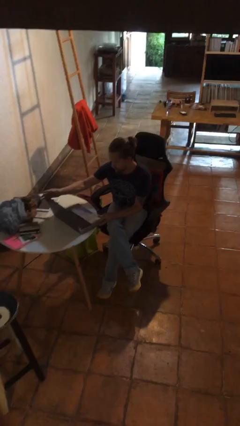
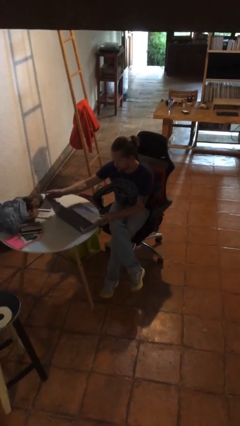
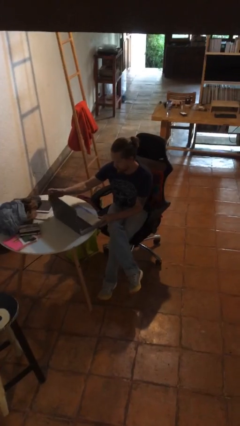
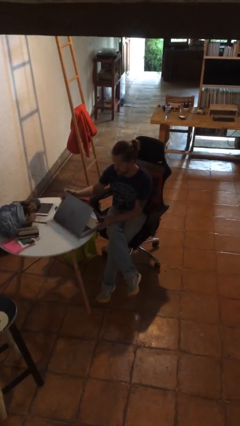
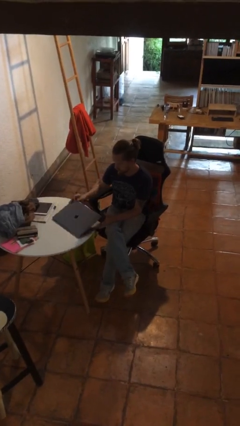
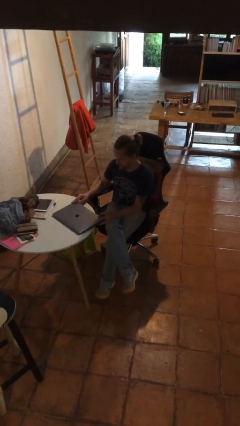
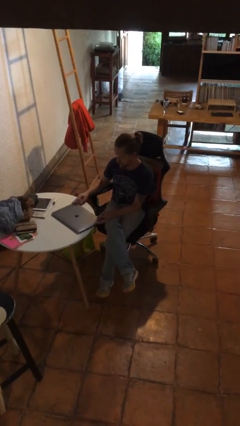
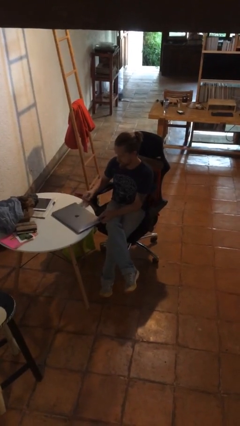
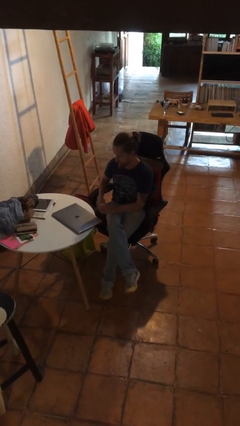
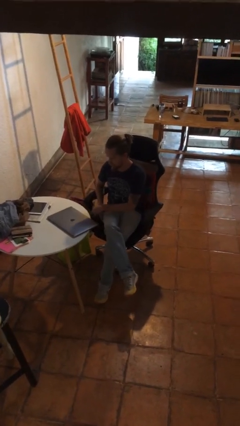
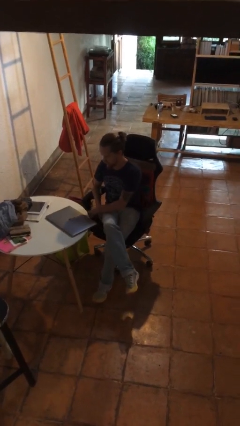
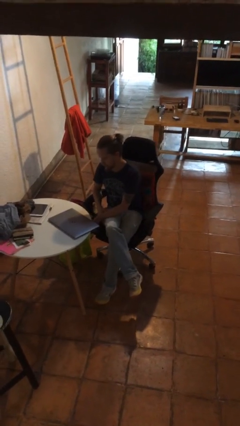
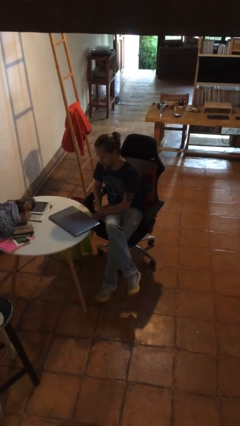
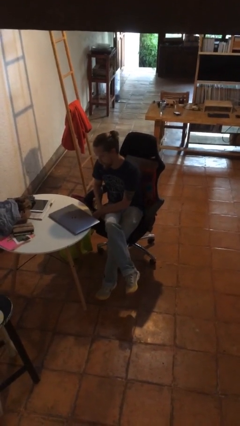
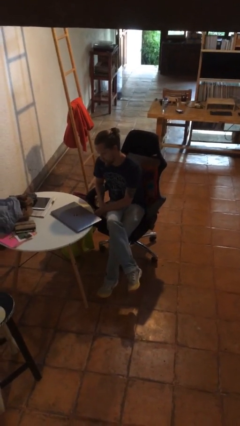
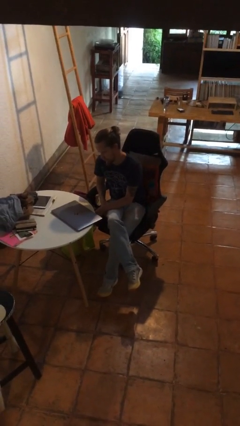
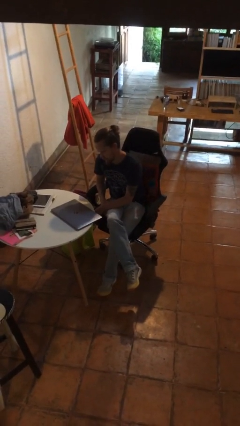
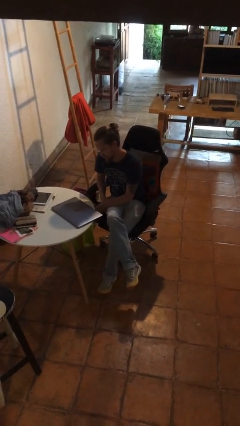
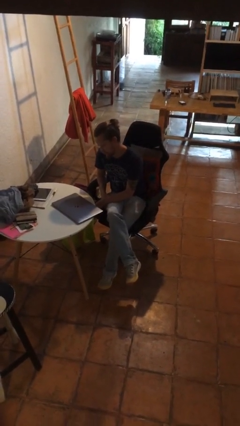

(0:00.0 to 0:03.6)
person closes laptop

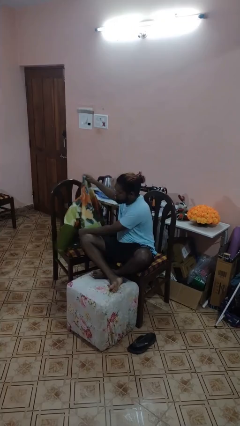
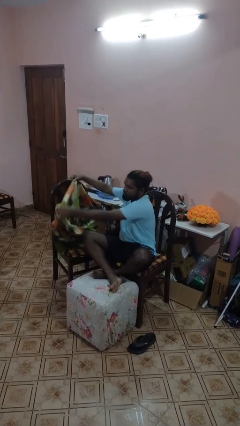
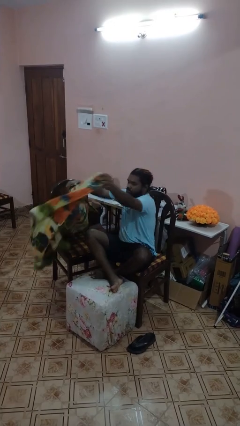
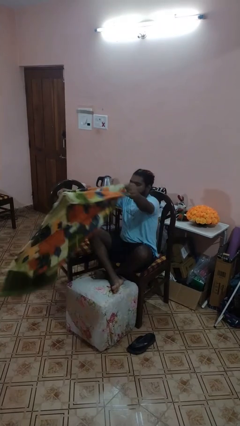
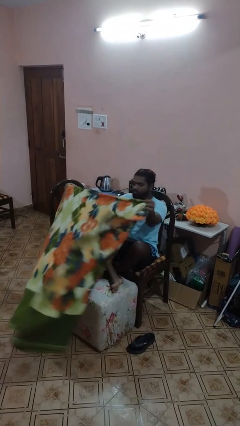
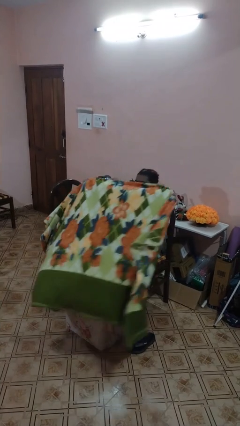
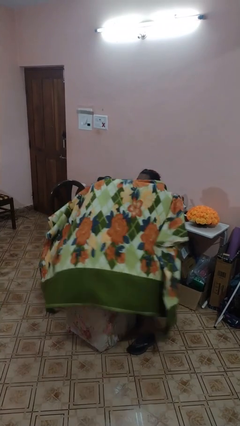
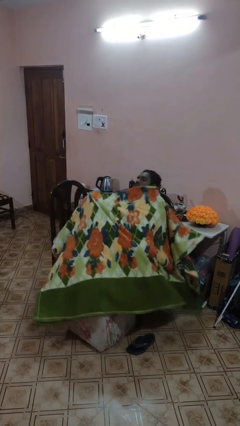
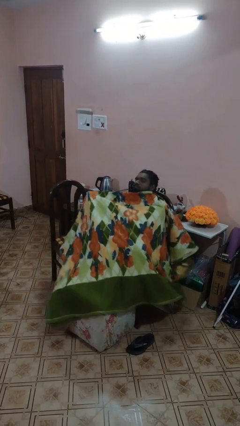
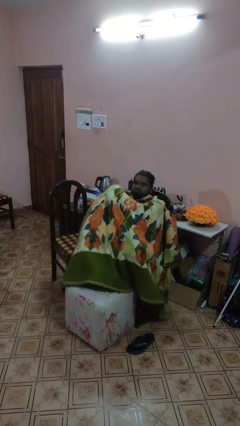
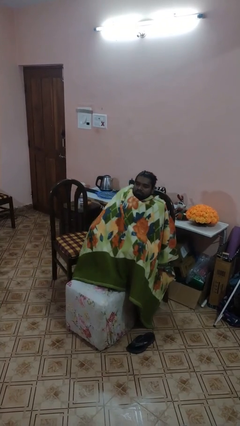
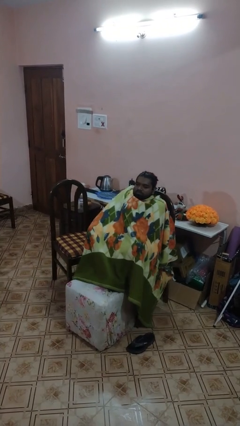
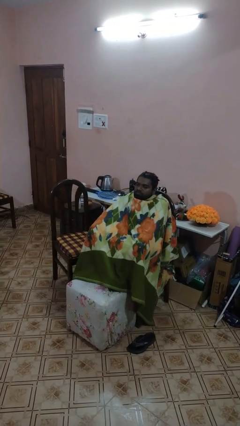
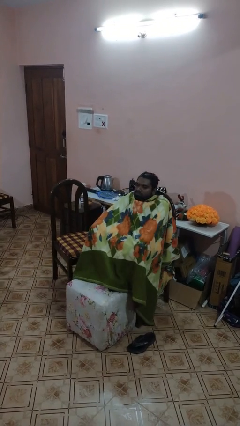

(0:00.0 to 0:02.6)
person covers with blanket

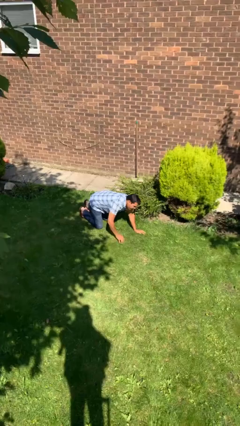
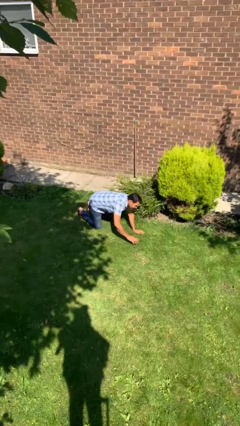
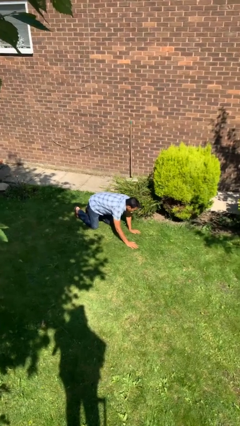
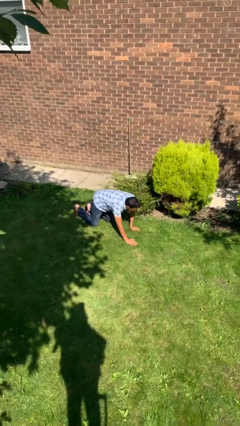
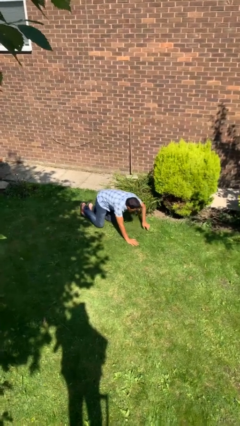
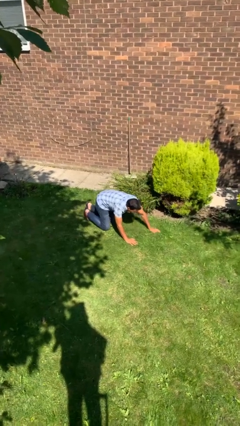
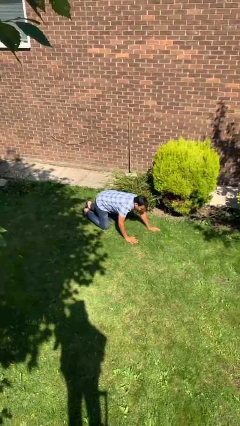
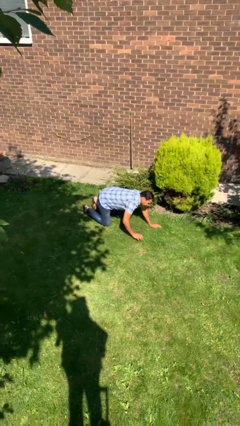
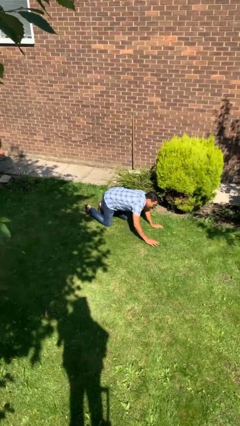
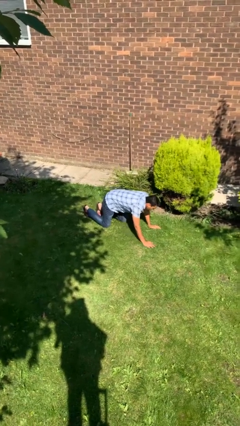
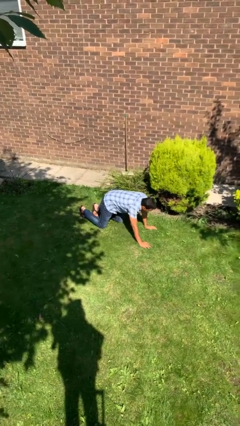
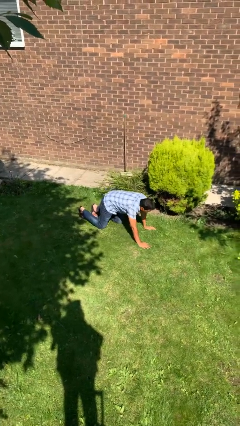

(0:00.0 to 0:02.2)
person crawls

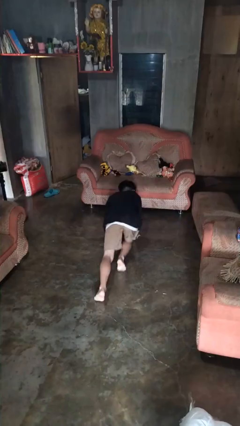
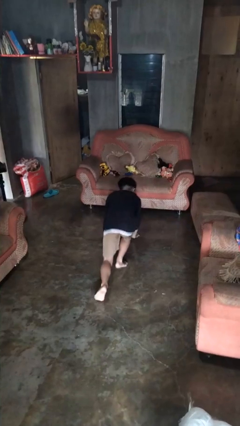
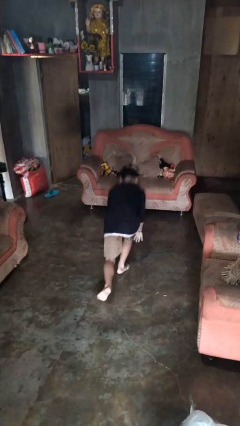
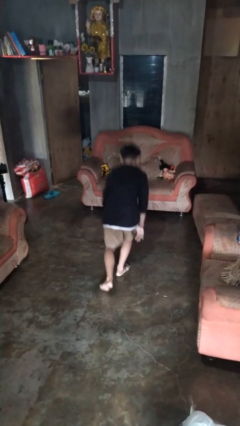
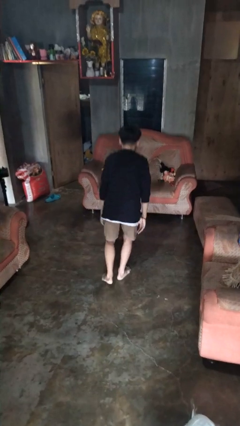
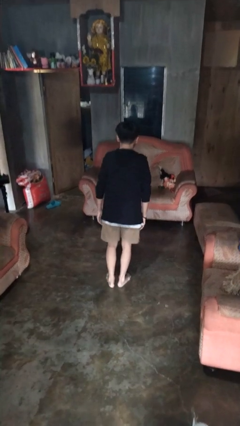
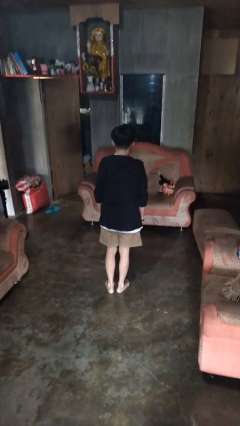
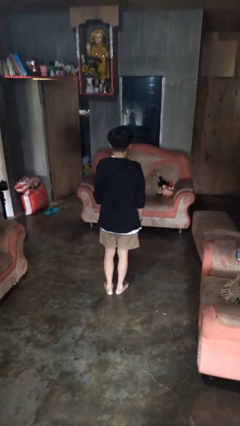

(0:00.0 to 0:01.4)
person stands up from floor

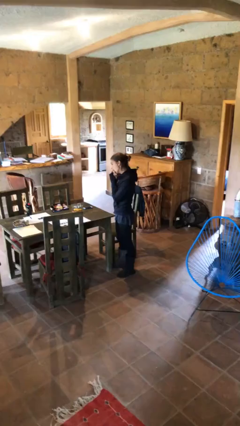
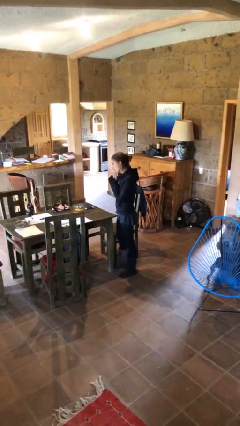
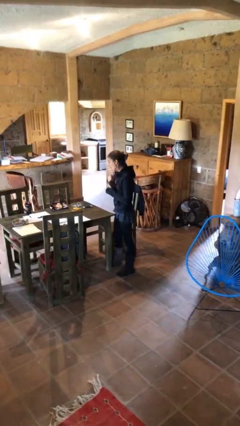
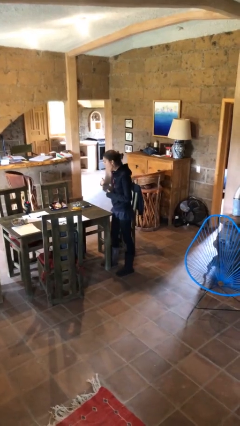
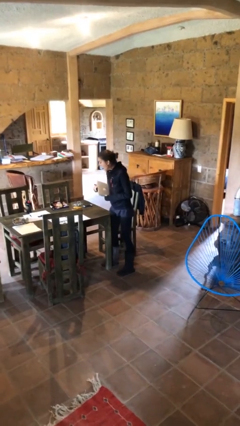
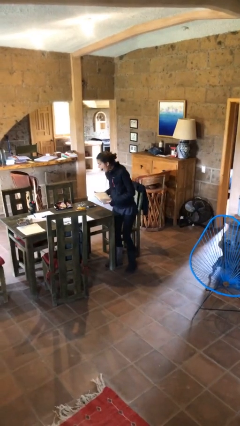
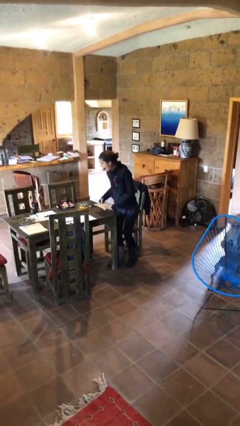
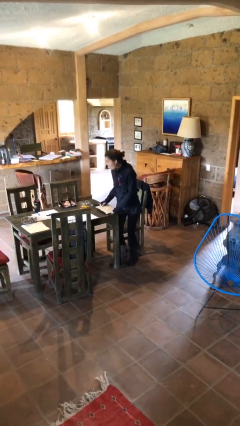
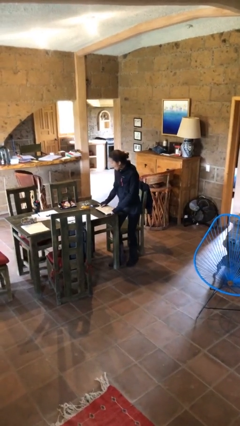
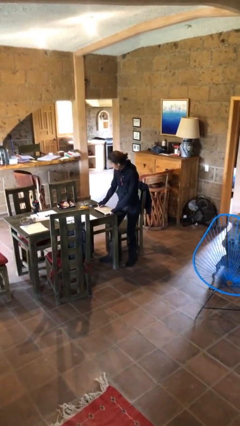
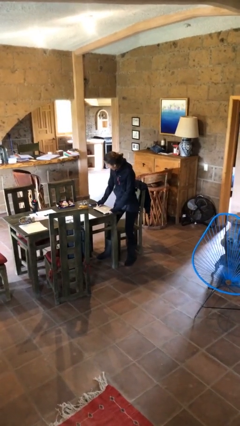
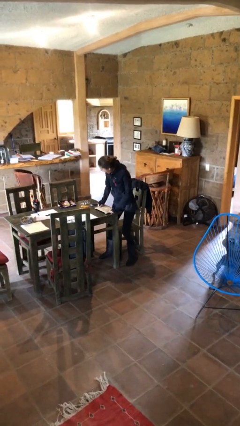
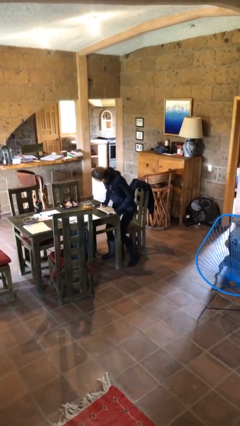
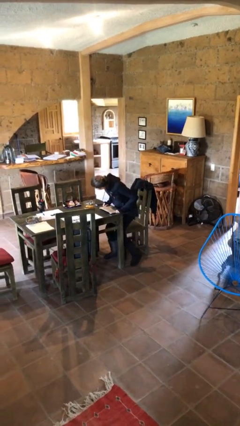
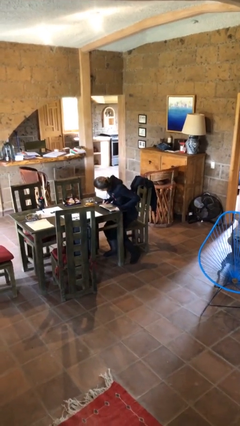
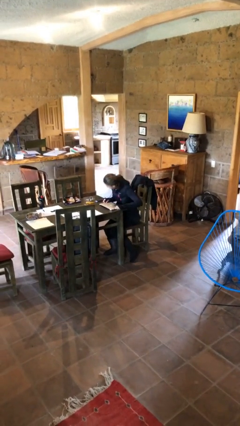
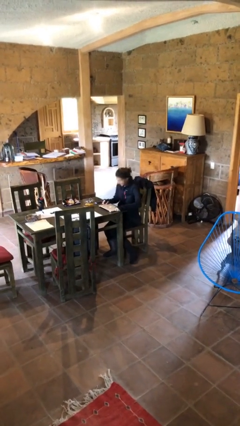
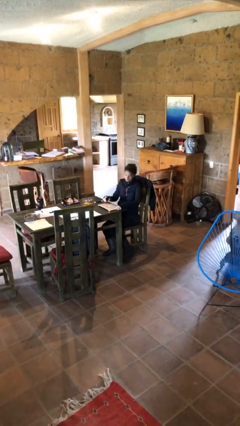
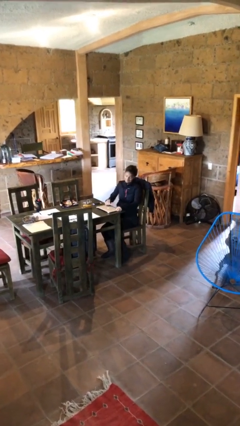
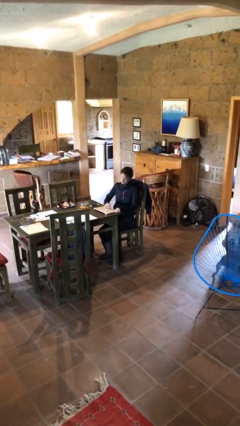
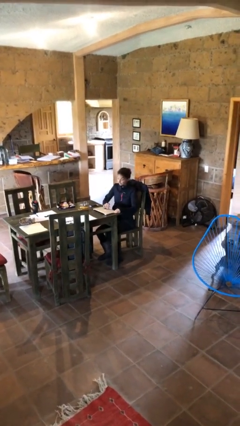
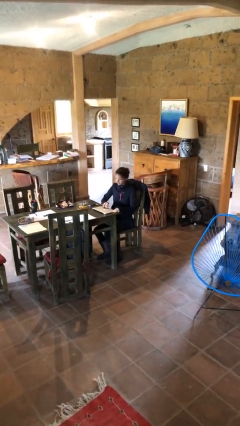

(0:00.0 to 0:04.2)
person sits down

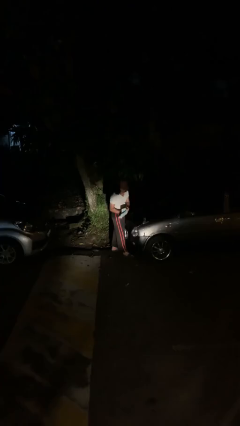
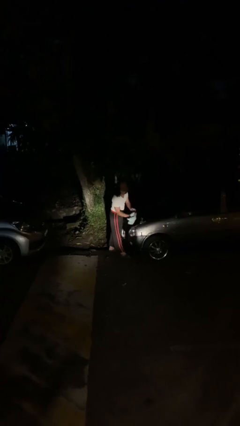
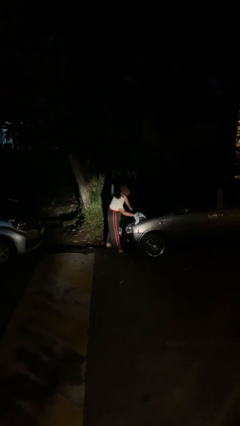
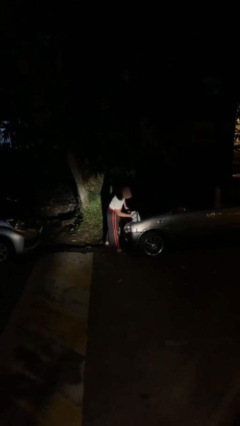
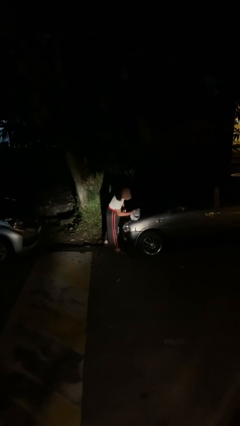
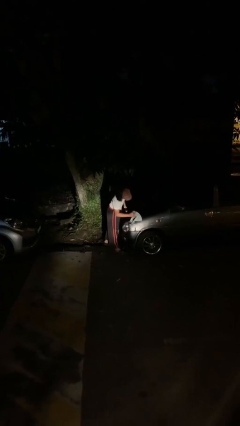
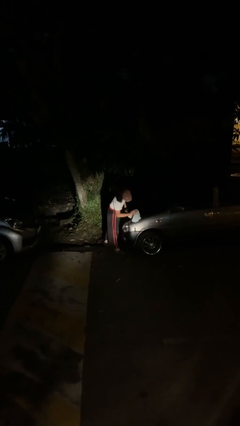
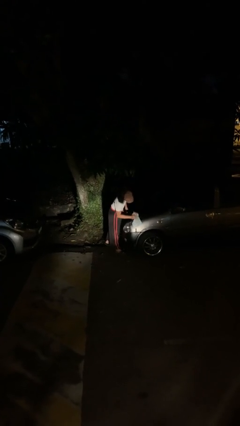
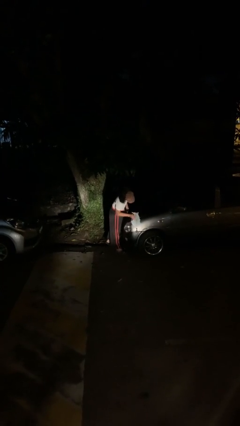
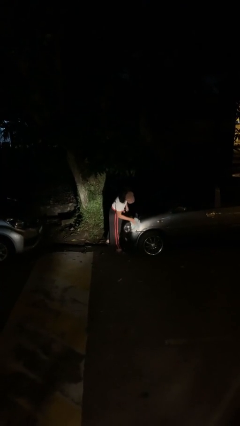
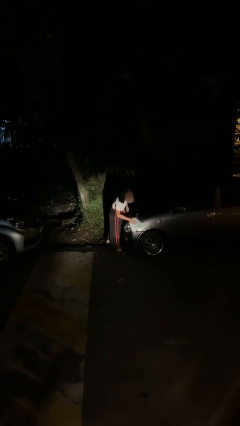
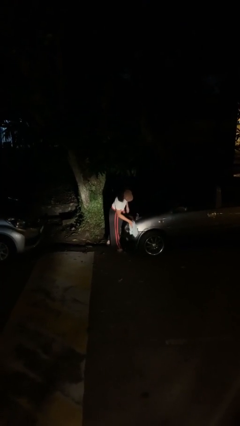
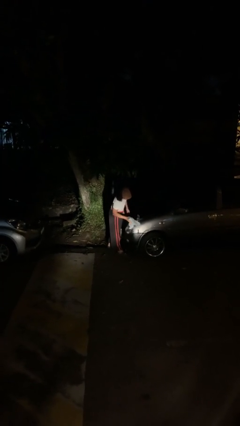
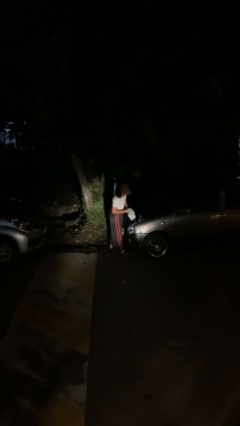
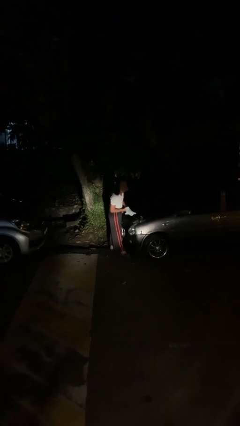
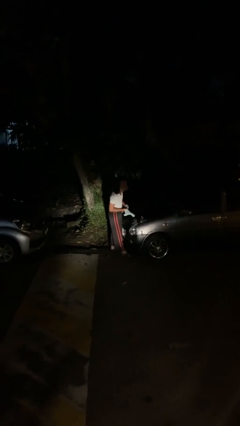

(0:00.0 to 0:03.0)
person polishes car with rag

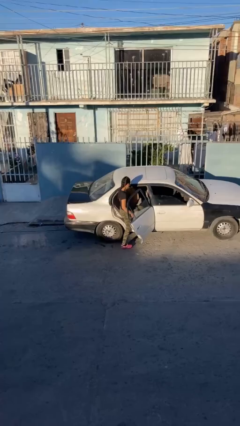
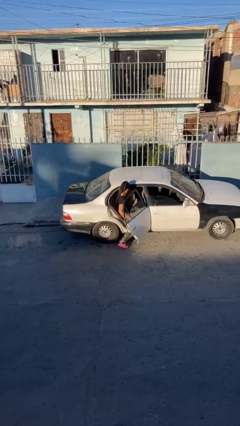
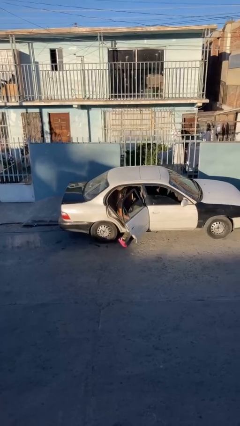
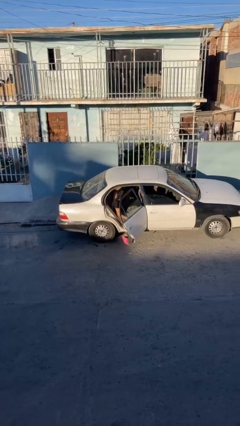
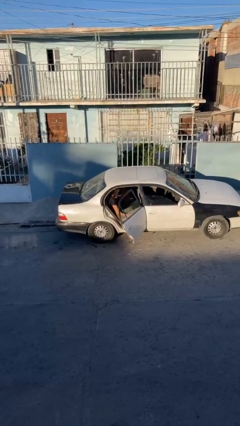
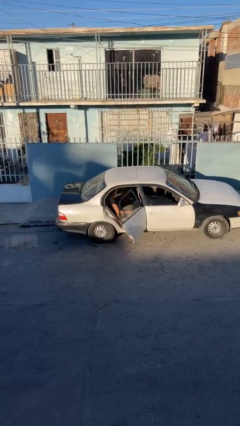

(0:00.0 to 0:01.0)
person enters car
